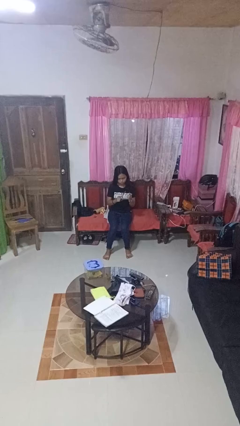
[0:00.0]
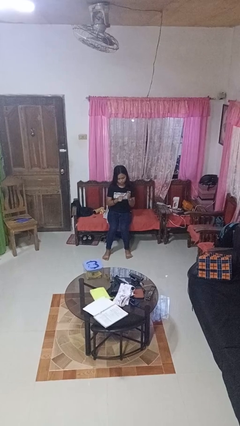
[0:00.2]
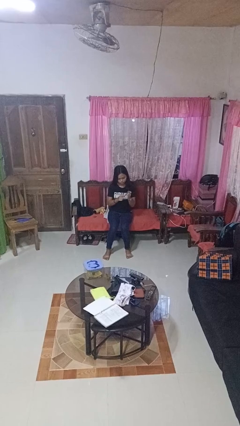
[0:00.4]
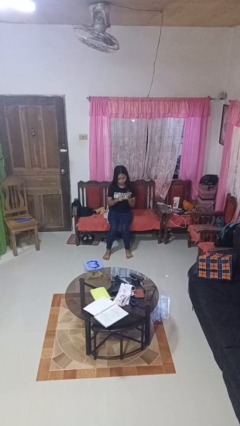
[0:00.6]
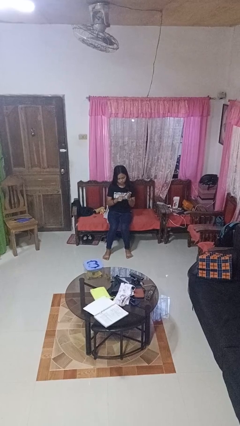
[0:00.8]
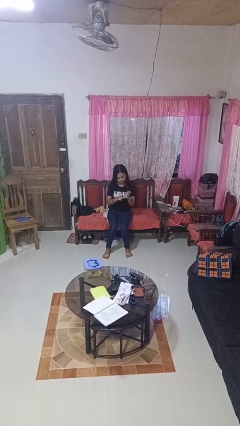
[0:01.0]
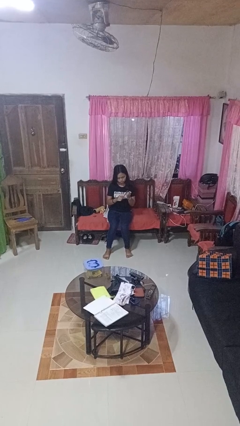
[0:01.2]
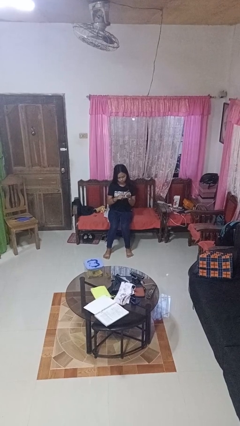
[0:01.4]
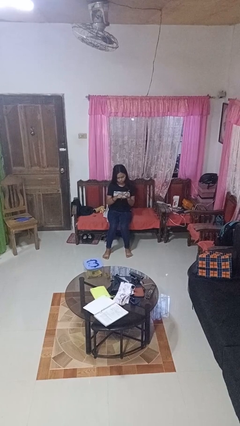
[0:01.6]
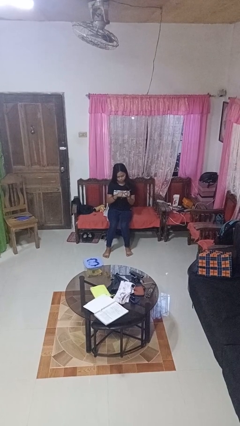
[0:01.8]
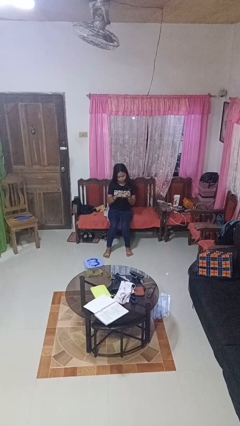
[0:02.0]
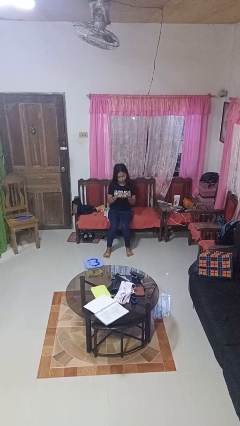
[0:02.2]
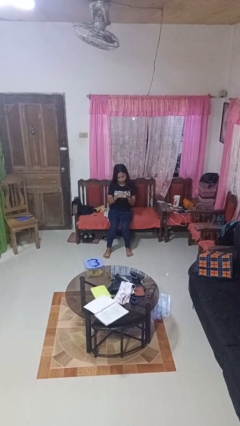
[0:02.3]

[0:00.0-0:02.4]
person files fingernails

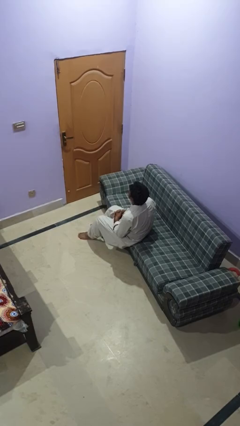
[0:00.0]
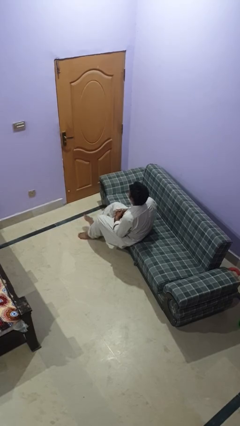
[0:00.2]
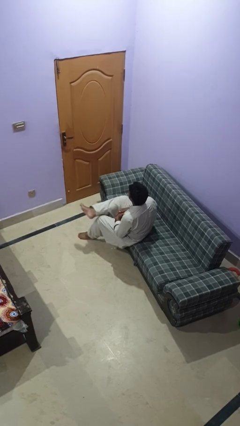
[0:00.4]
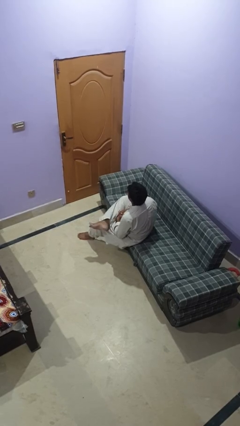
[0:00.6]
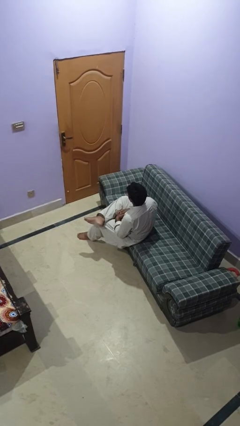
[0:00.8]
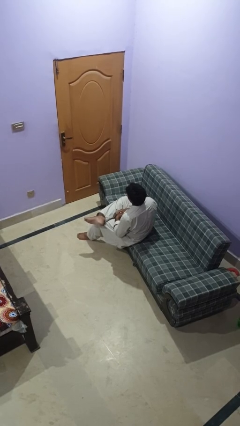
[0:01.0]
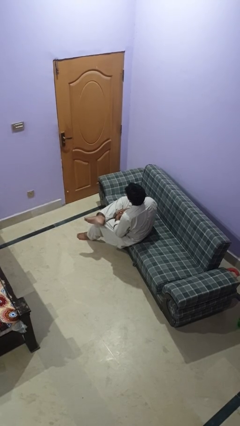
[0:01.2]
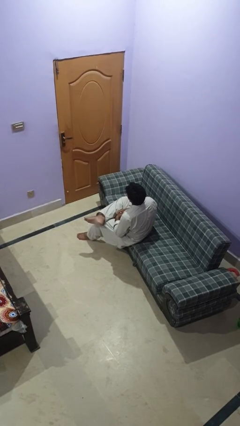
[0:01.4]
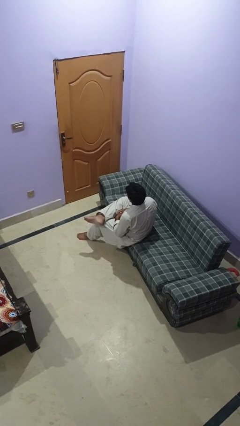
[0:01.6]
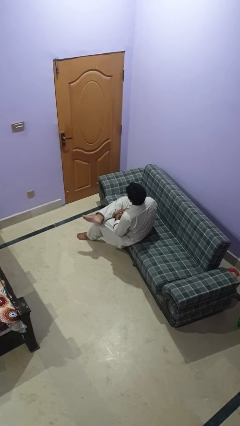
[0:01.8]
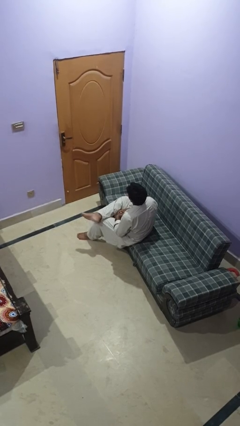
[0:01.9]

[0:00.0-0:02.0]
person crosses legs

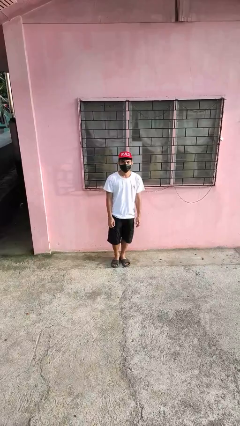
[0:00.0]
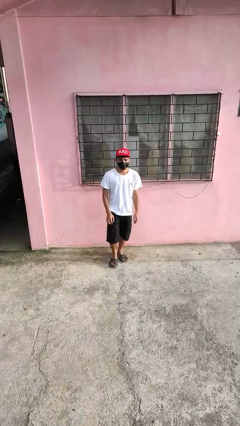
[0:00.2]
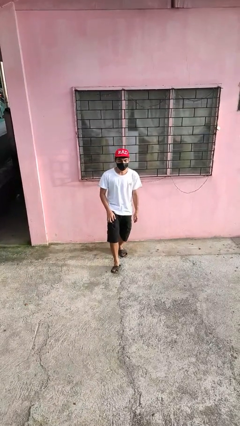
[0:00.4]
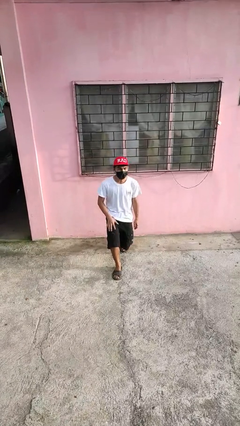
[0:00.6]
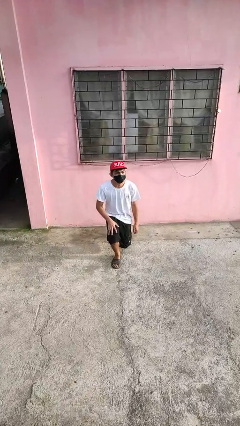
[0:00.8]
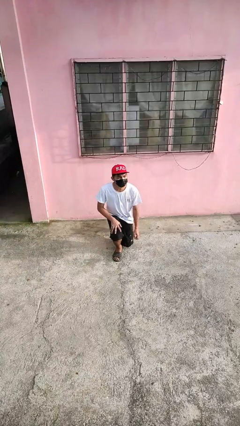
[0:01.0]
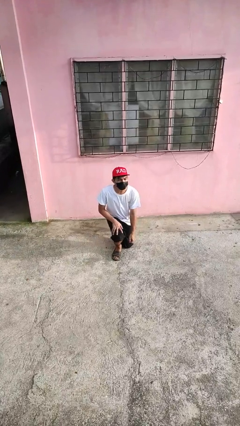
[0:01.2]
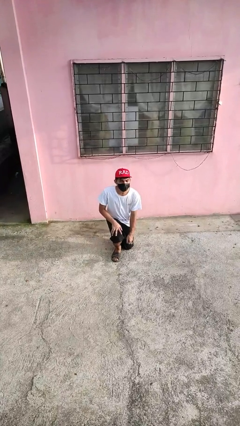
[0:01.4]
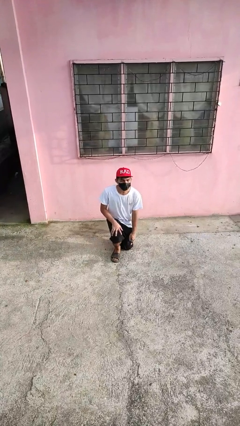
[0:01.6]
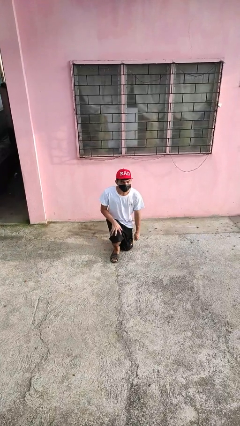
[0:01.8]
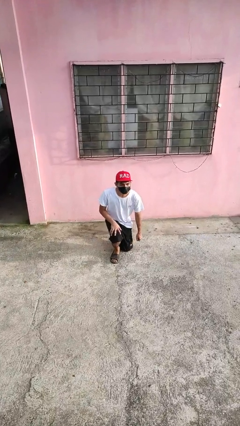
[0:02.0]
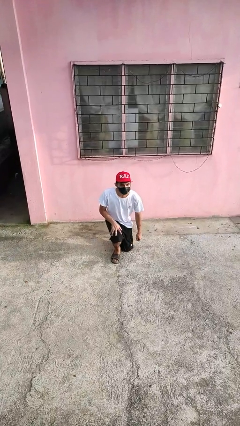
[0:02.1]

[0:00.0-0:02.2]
person kneels

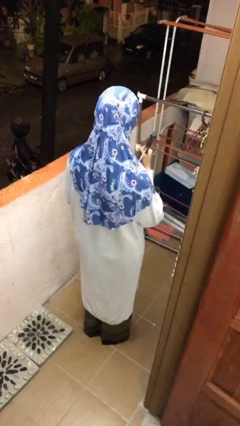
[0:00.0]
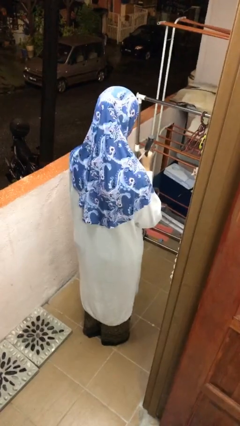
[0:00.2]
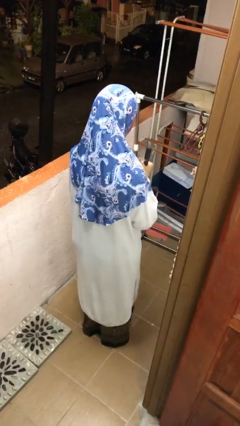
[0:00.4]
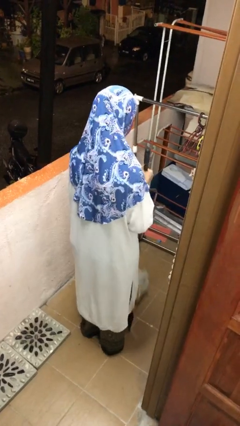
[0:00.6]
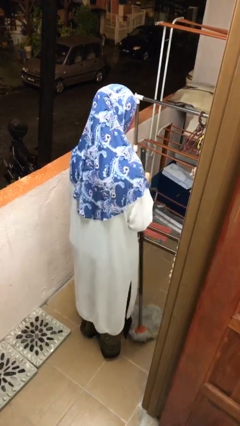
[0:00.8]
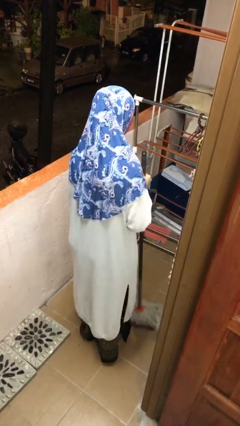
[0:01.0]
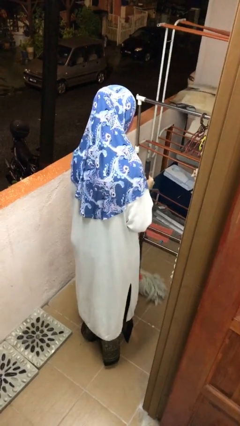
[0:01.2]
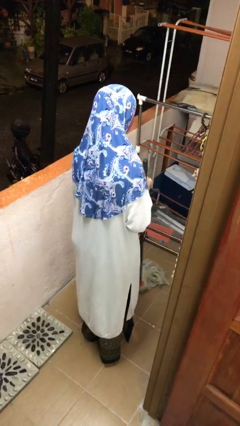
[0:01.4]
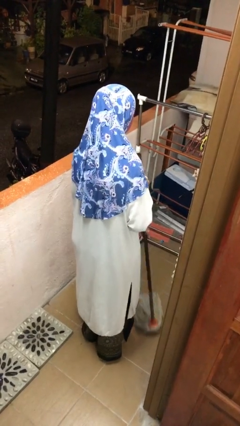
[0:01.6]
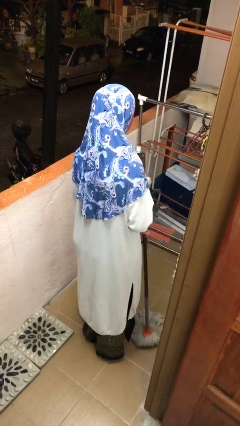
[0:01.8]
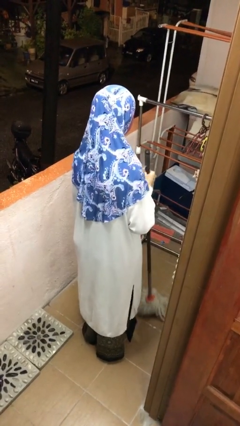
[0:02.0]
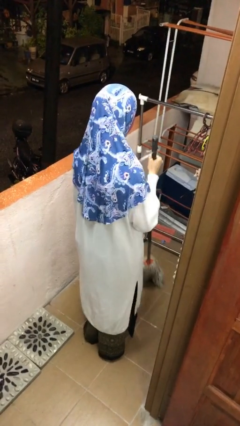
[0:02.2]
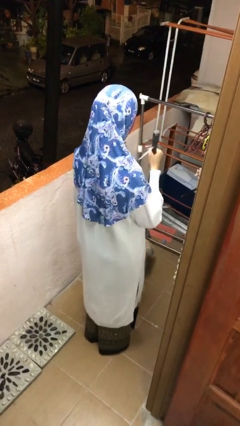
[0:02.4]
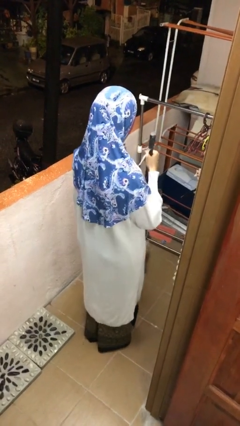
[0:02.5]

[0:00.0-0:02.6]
person mops

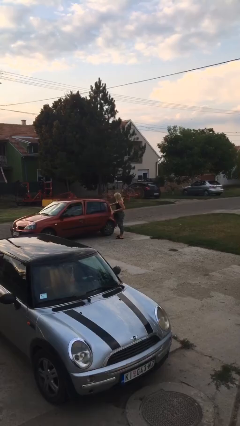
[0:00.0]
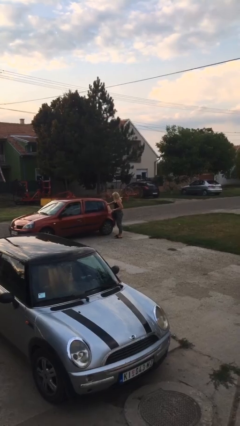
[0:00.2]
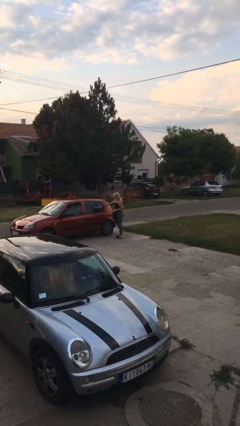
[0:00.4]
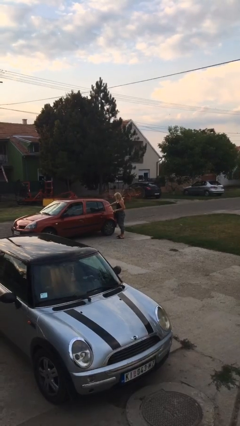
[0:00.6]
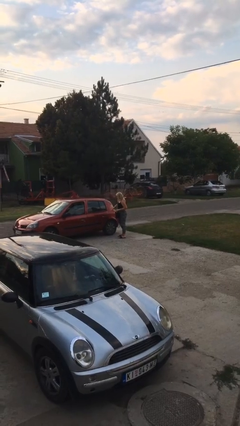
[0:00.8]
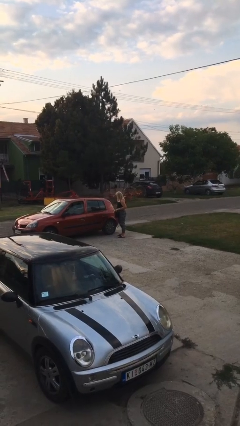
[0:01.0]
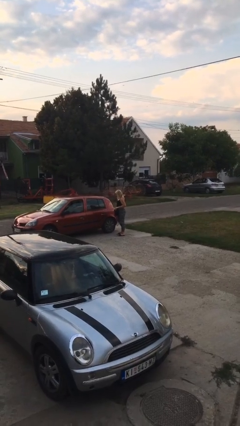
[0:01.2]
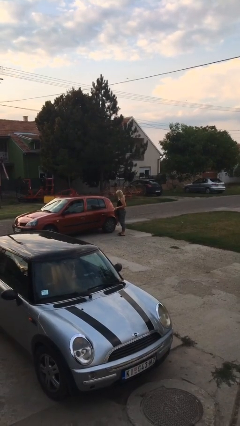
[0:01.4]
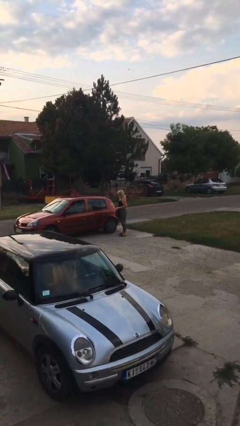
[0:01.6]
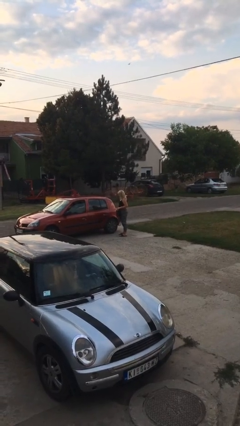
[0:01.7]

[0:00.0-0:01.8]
person closes car door

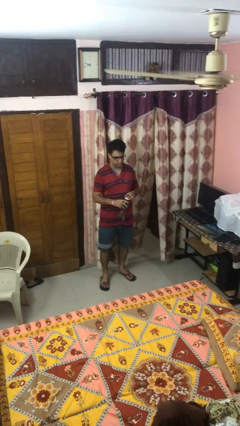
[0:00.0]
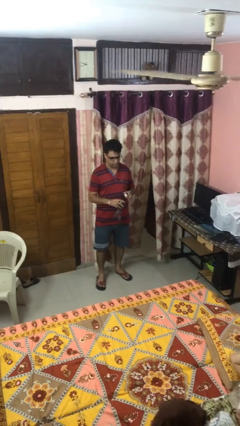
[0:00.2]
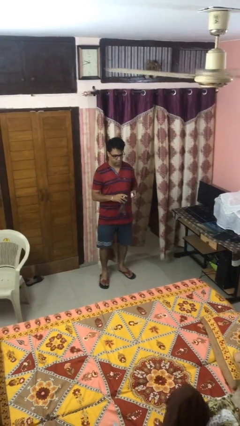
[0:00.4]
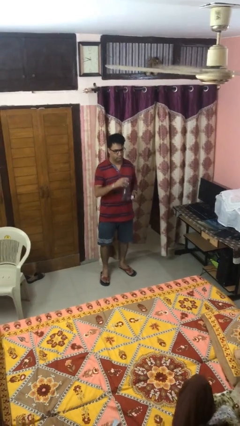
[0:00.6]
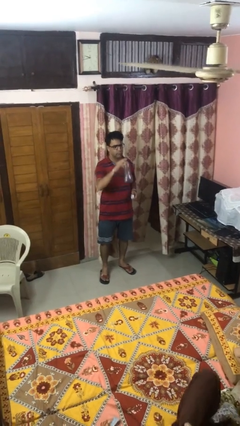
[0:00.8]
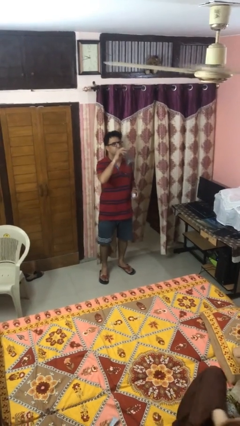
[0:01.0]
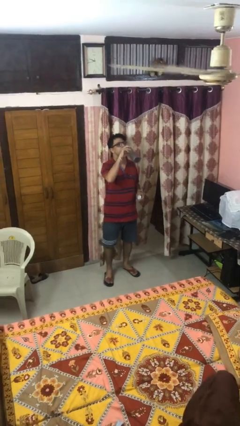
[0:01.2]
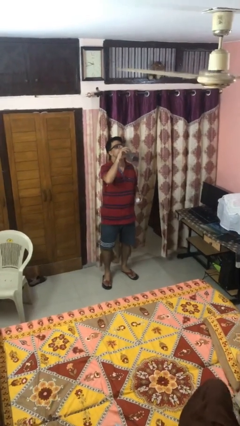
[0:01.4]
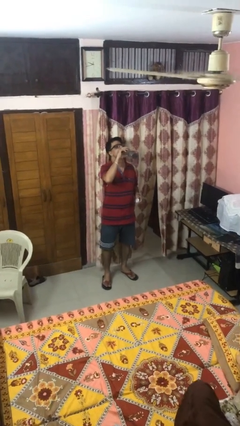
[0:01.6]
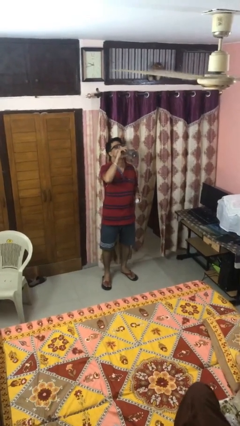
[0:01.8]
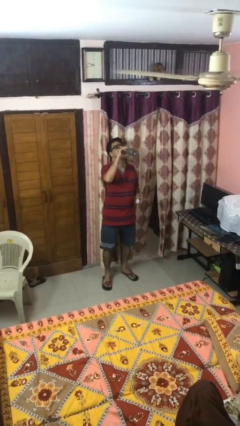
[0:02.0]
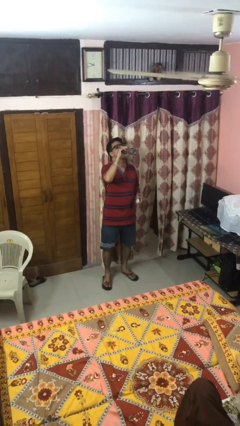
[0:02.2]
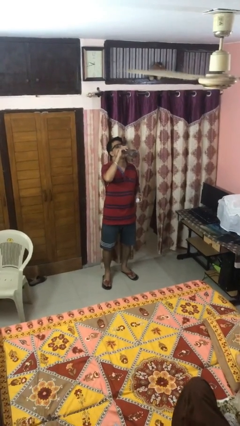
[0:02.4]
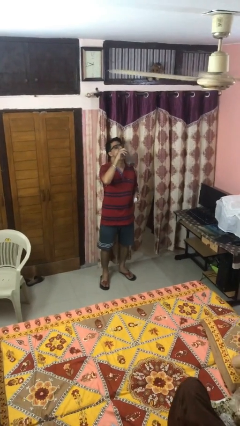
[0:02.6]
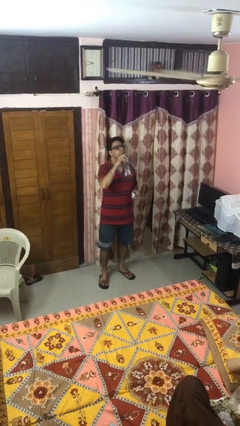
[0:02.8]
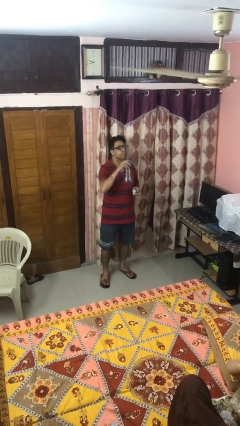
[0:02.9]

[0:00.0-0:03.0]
person drinks from bottle

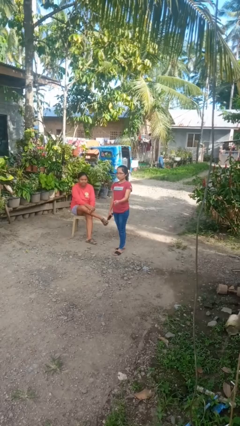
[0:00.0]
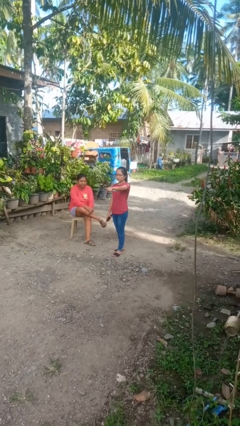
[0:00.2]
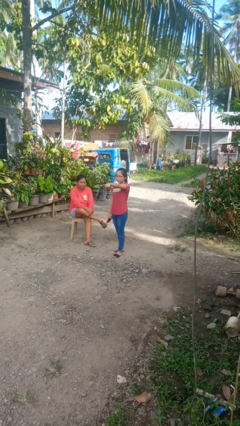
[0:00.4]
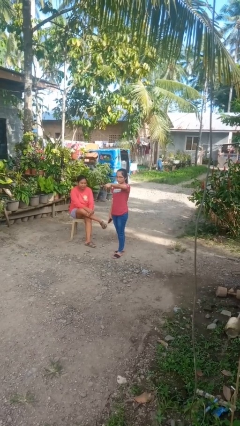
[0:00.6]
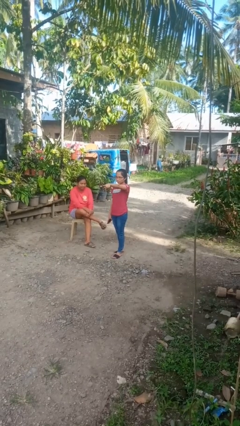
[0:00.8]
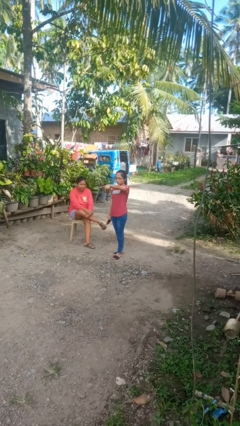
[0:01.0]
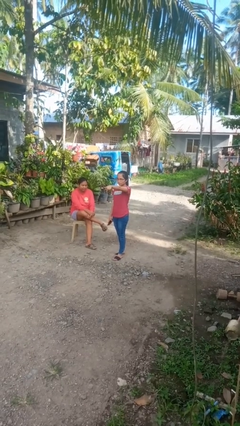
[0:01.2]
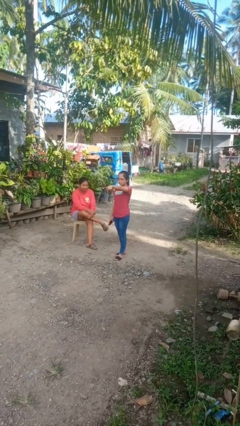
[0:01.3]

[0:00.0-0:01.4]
person points at person

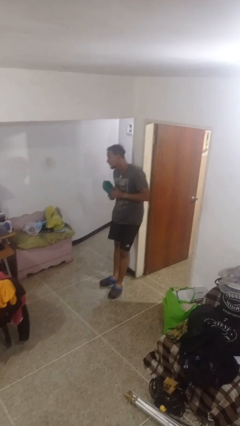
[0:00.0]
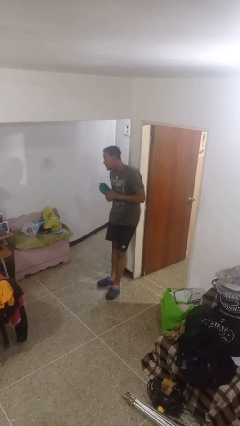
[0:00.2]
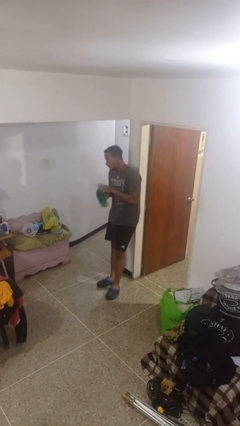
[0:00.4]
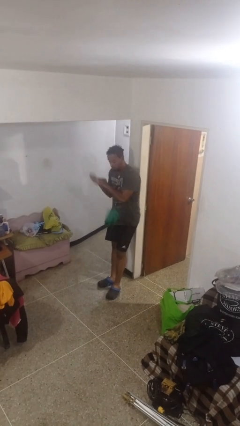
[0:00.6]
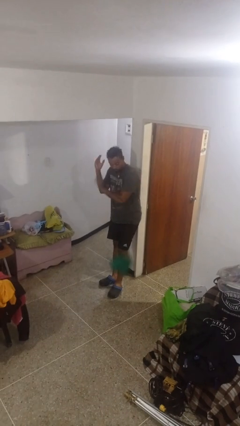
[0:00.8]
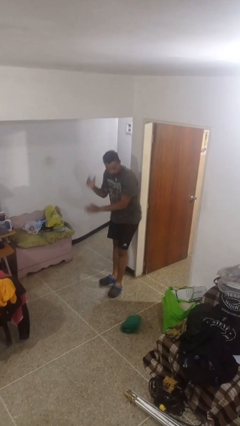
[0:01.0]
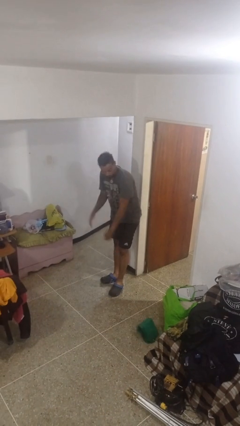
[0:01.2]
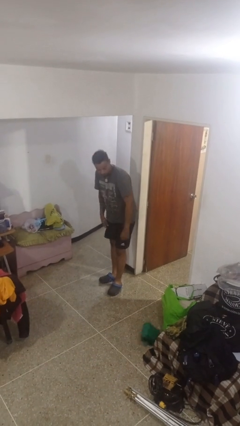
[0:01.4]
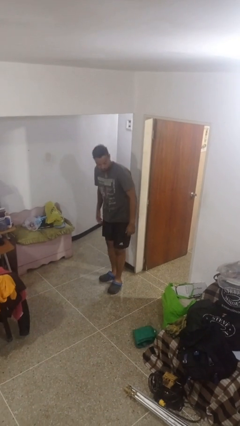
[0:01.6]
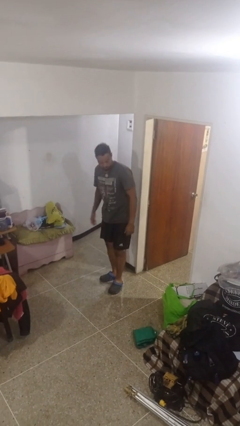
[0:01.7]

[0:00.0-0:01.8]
person drops object
